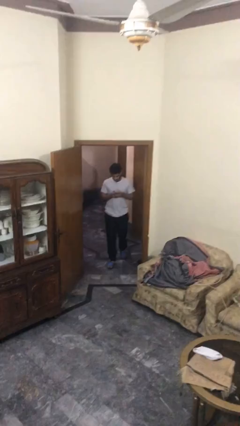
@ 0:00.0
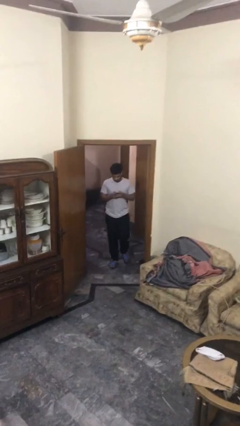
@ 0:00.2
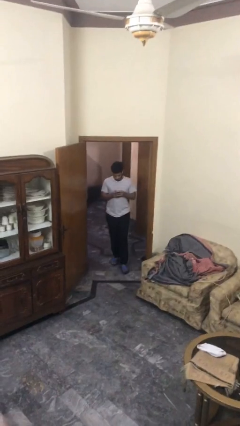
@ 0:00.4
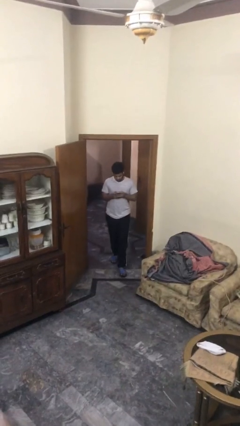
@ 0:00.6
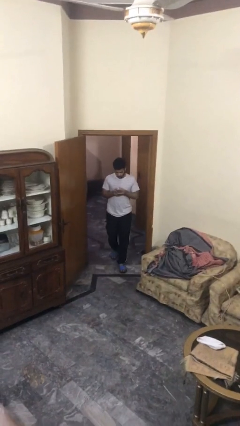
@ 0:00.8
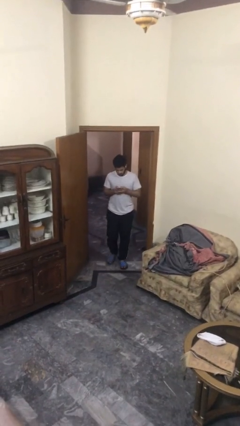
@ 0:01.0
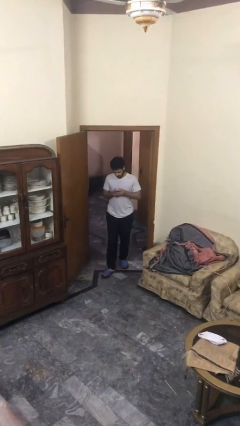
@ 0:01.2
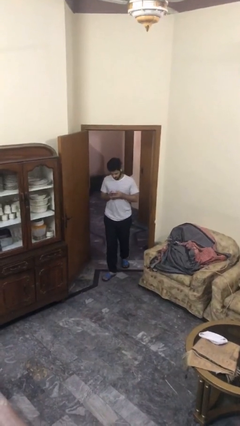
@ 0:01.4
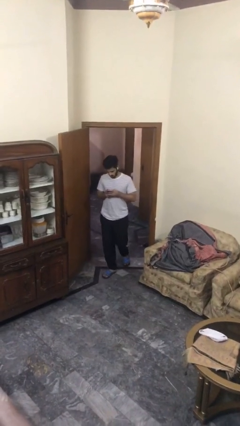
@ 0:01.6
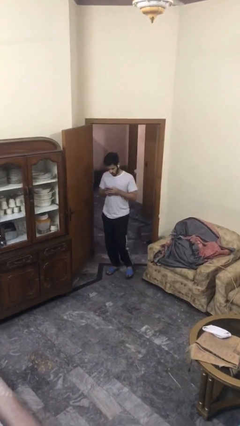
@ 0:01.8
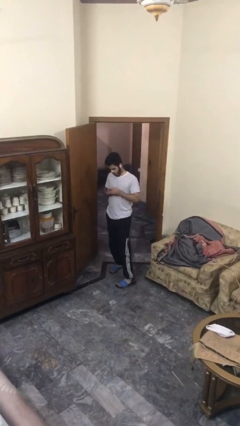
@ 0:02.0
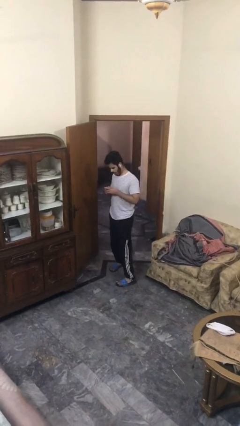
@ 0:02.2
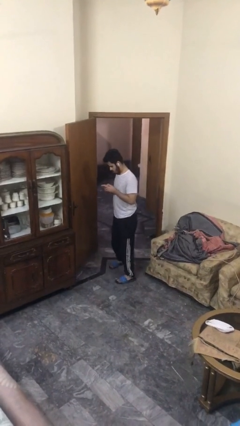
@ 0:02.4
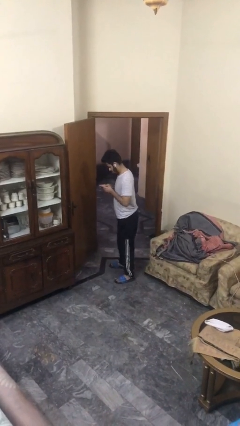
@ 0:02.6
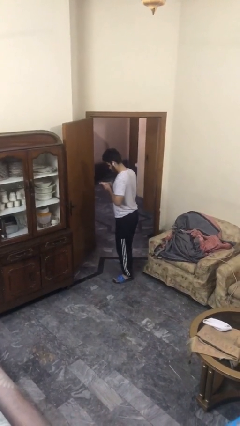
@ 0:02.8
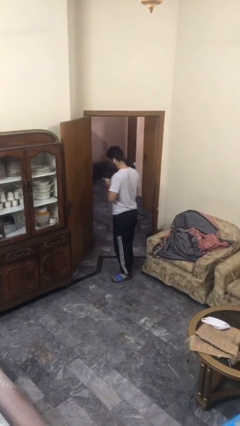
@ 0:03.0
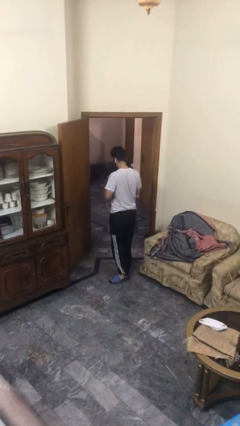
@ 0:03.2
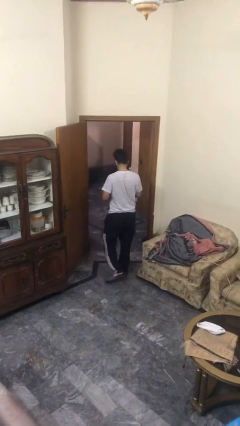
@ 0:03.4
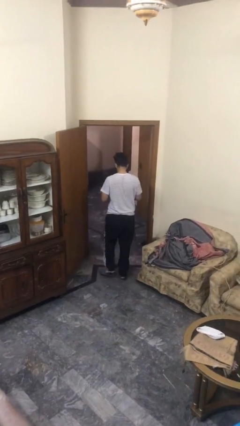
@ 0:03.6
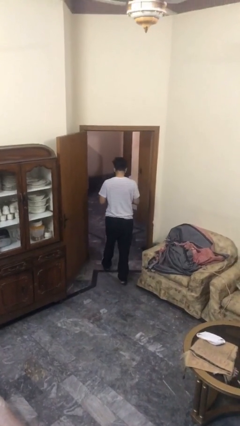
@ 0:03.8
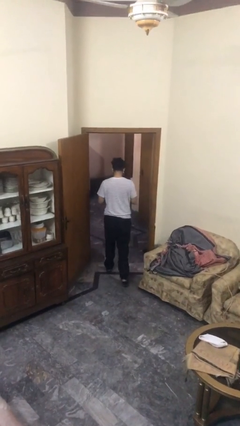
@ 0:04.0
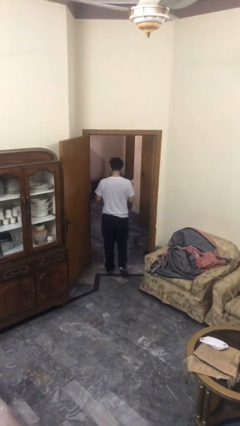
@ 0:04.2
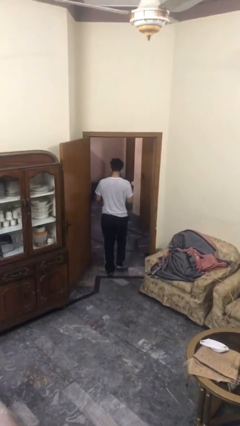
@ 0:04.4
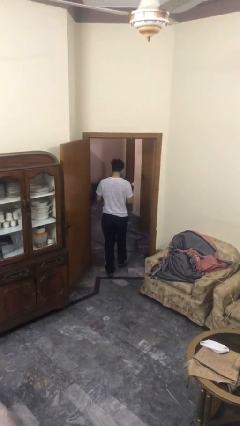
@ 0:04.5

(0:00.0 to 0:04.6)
person enters scene through structure

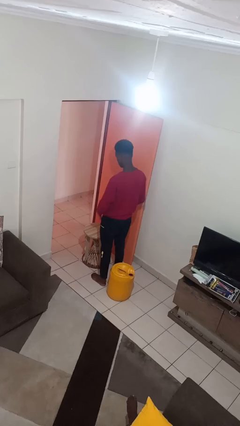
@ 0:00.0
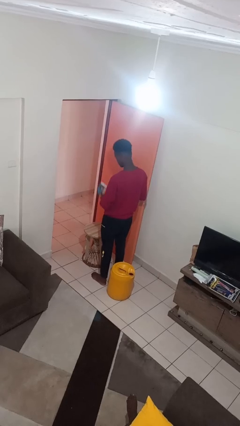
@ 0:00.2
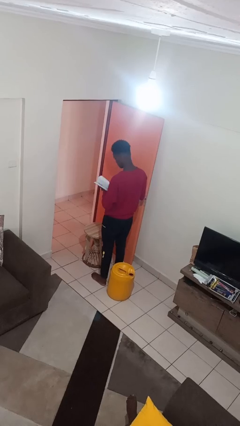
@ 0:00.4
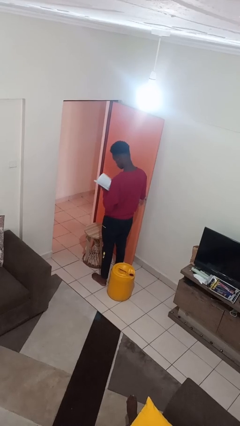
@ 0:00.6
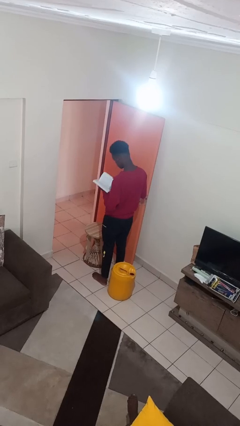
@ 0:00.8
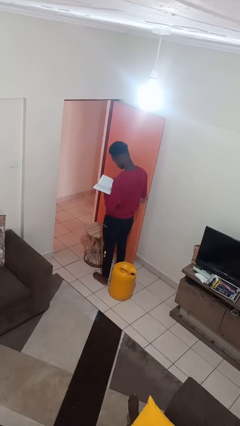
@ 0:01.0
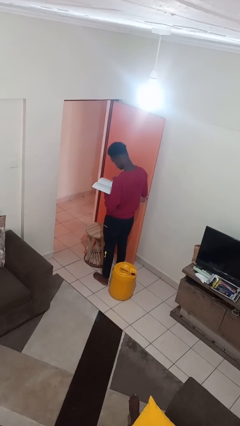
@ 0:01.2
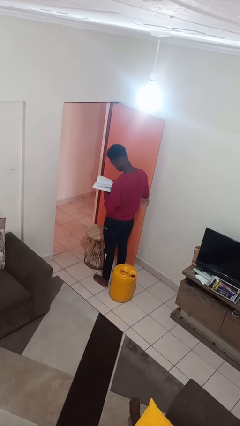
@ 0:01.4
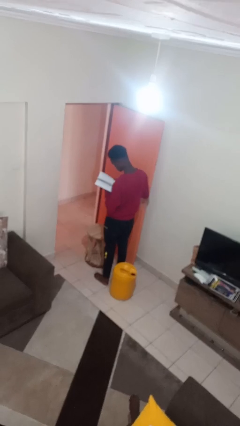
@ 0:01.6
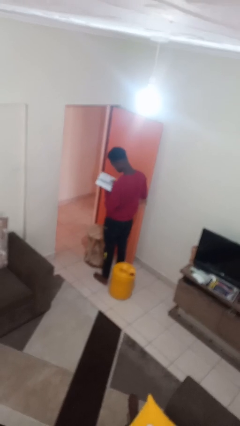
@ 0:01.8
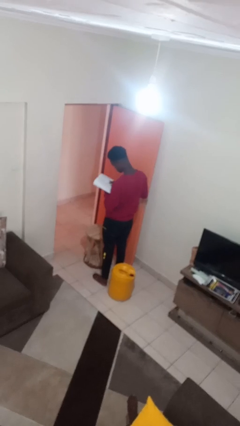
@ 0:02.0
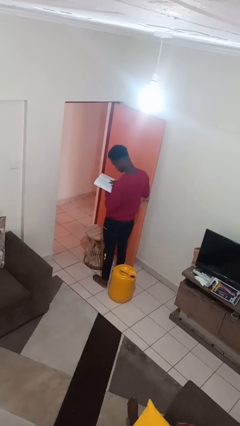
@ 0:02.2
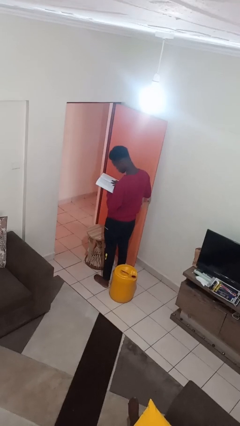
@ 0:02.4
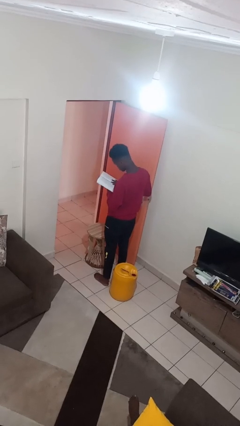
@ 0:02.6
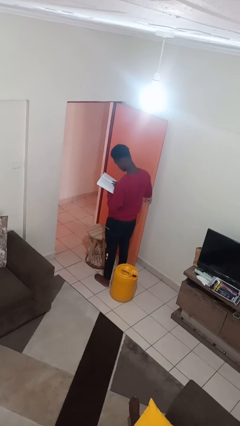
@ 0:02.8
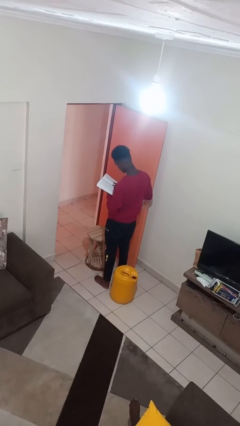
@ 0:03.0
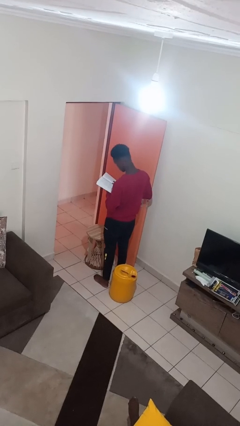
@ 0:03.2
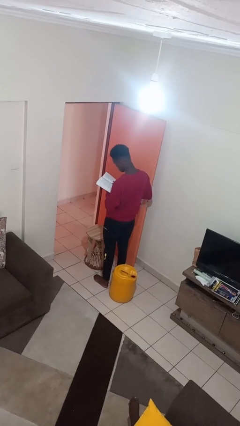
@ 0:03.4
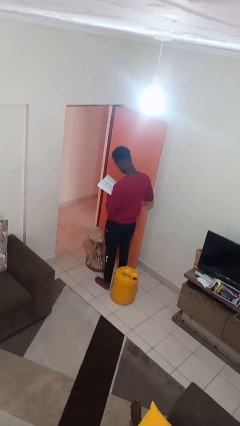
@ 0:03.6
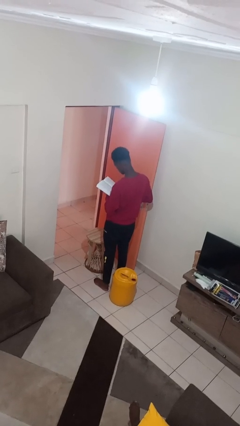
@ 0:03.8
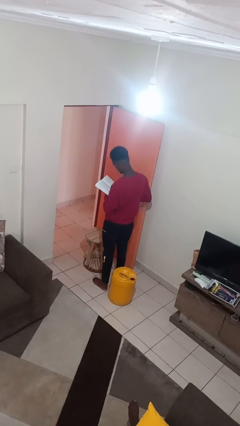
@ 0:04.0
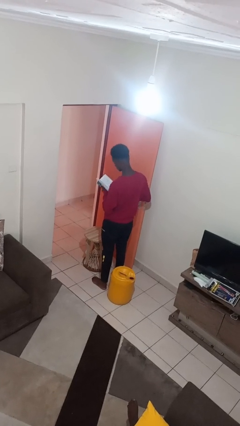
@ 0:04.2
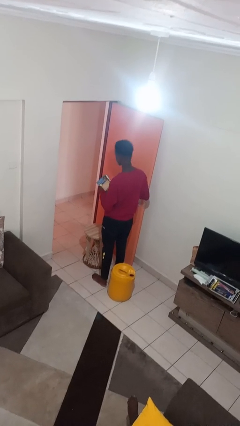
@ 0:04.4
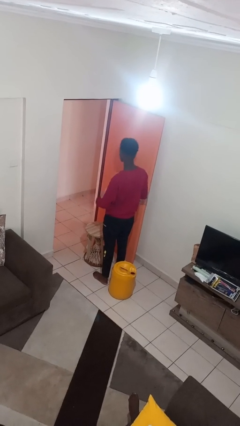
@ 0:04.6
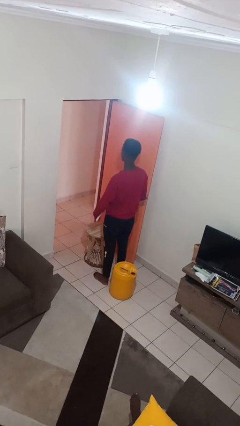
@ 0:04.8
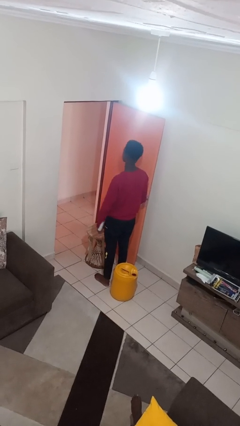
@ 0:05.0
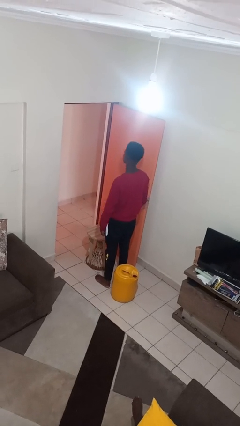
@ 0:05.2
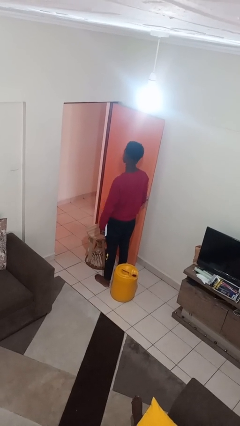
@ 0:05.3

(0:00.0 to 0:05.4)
person reads book

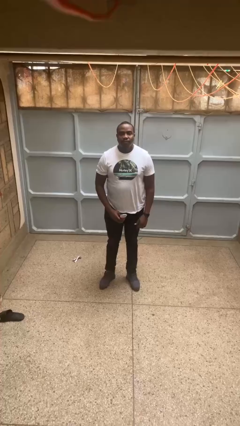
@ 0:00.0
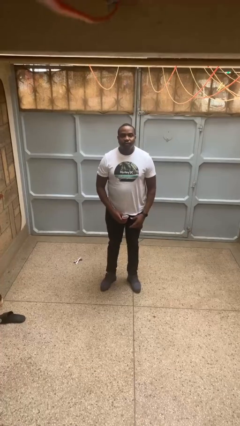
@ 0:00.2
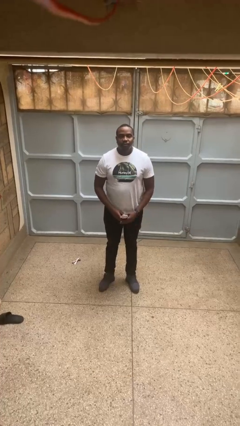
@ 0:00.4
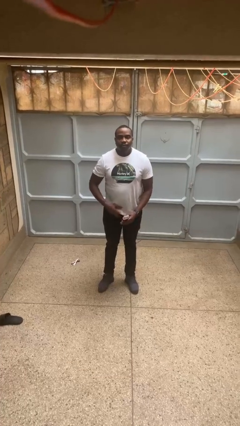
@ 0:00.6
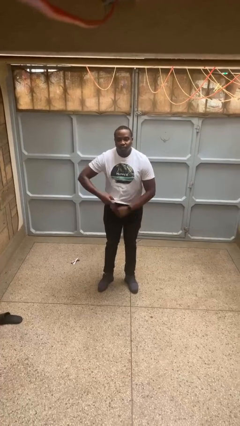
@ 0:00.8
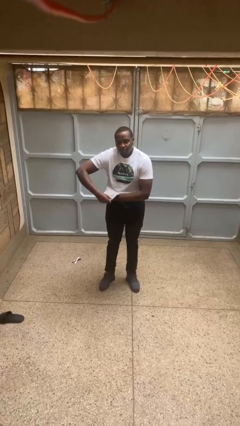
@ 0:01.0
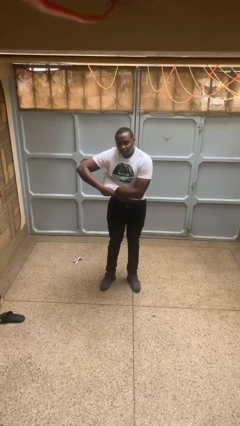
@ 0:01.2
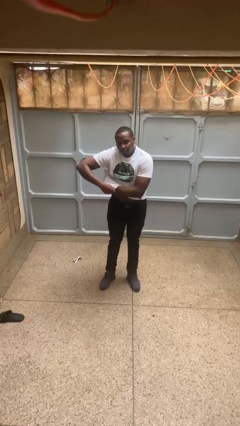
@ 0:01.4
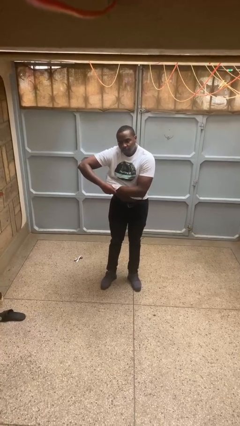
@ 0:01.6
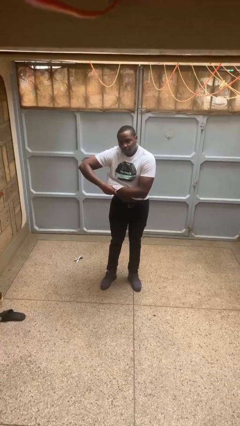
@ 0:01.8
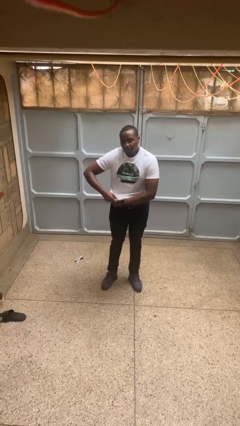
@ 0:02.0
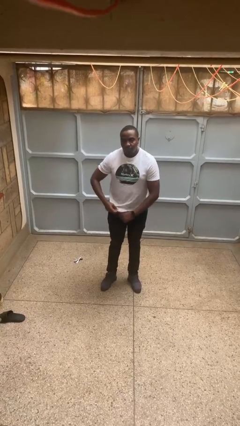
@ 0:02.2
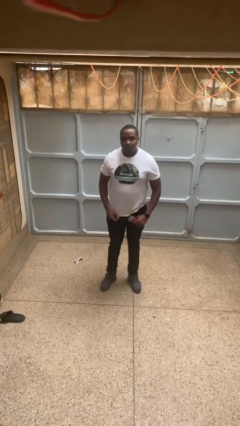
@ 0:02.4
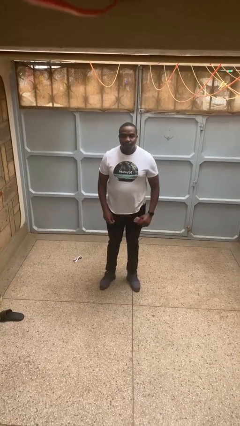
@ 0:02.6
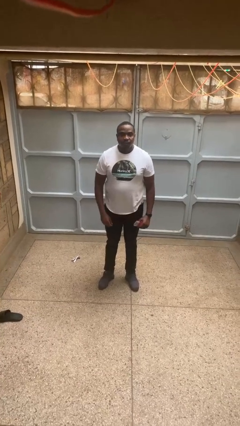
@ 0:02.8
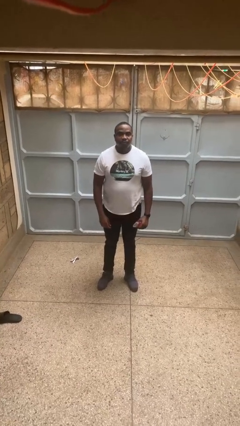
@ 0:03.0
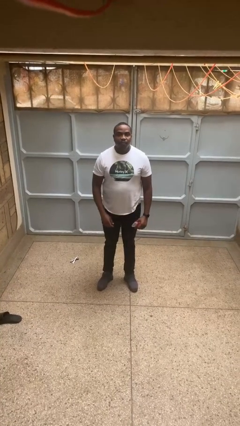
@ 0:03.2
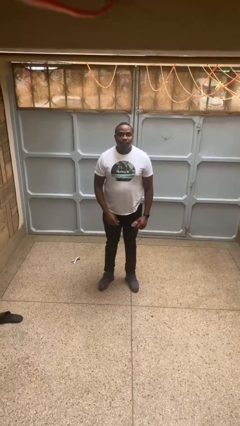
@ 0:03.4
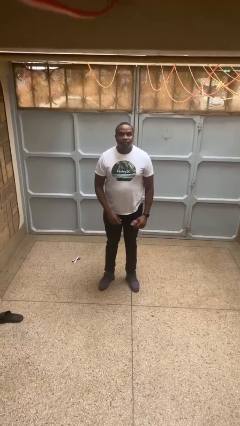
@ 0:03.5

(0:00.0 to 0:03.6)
person applies deodorant

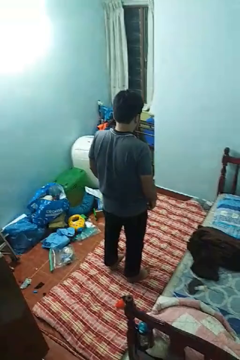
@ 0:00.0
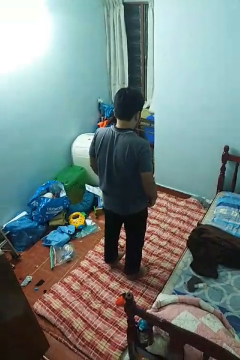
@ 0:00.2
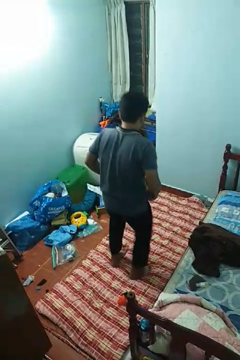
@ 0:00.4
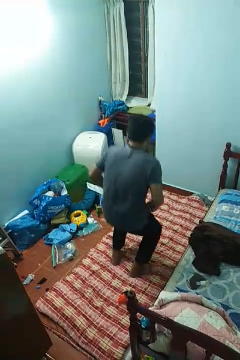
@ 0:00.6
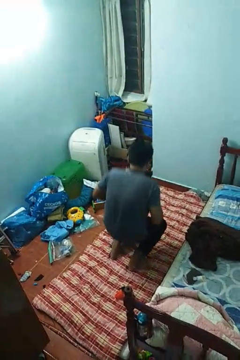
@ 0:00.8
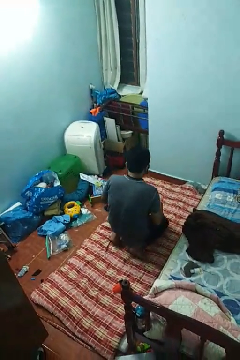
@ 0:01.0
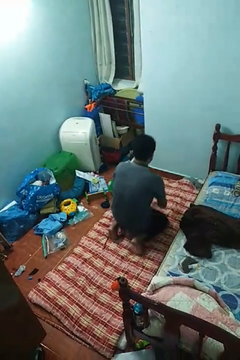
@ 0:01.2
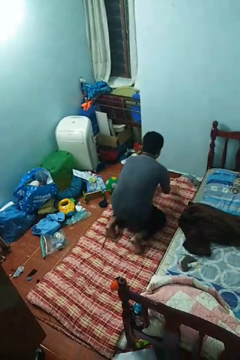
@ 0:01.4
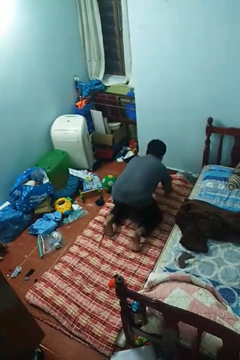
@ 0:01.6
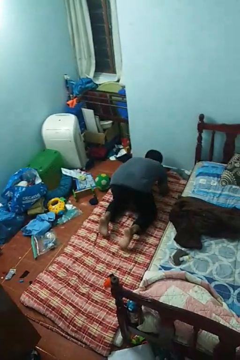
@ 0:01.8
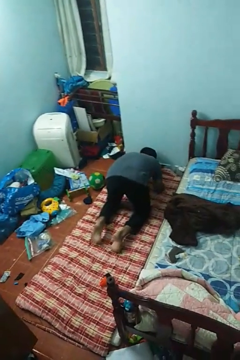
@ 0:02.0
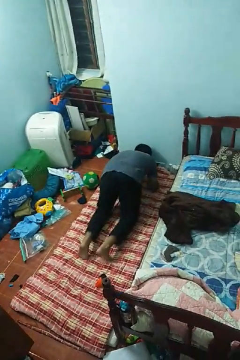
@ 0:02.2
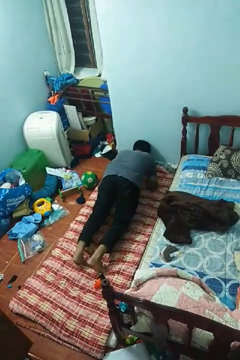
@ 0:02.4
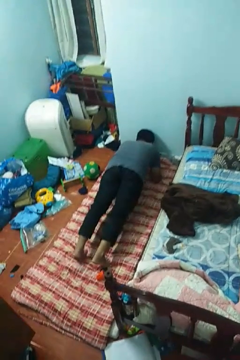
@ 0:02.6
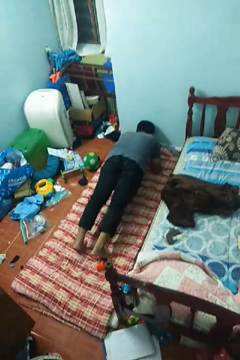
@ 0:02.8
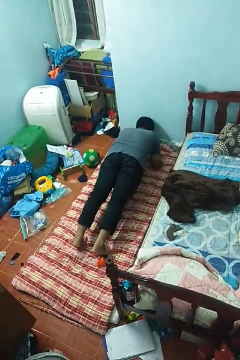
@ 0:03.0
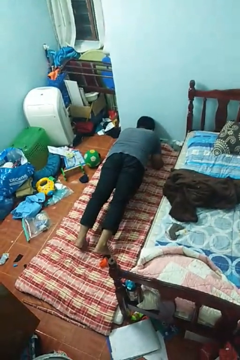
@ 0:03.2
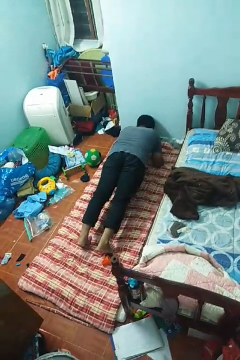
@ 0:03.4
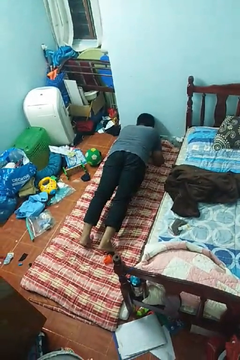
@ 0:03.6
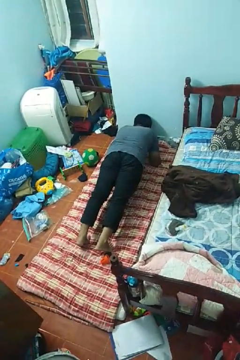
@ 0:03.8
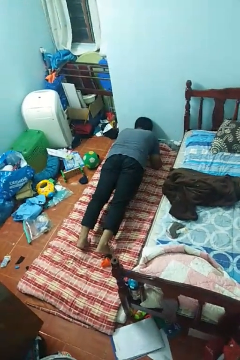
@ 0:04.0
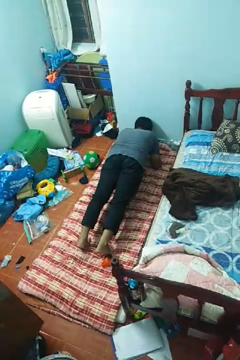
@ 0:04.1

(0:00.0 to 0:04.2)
person exercises with plank
